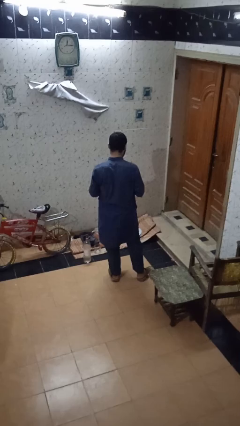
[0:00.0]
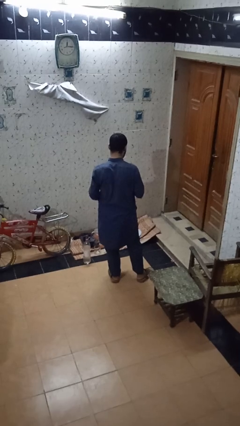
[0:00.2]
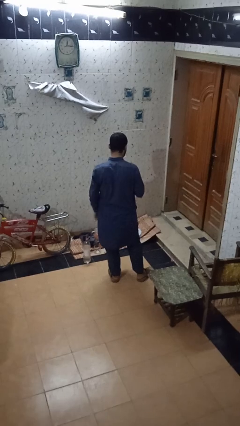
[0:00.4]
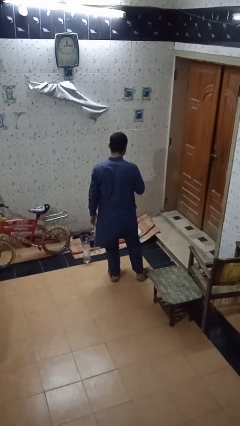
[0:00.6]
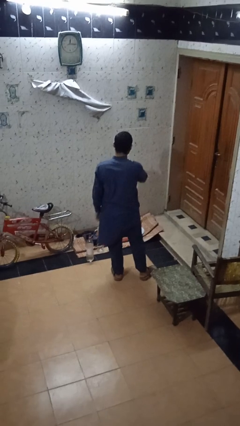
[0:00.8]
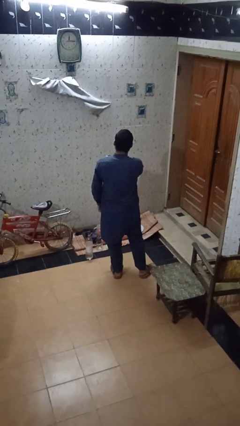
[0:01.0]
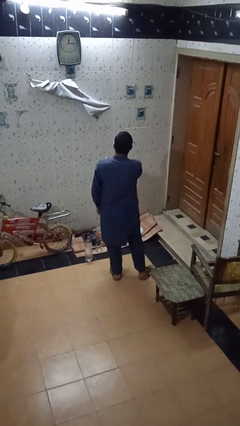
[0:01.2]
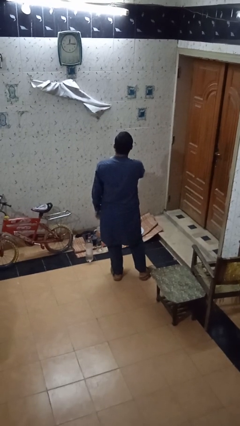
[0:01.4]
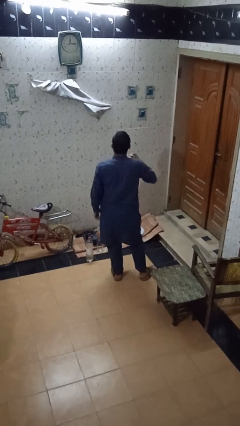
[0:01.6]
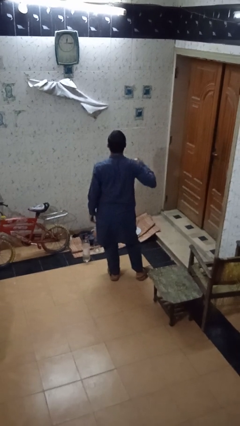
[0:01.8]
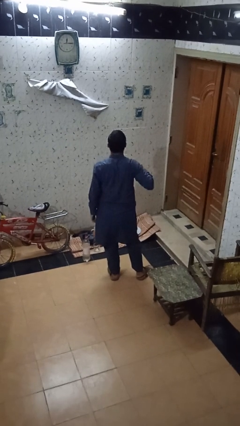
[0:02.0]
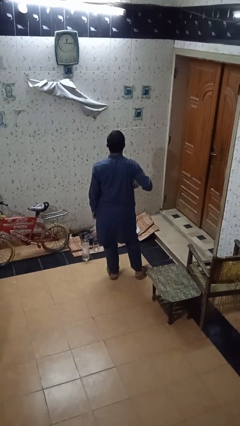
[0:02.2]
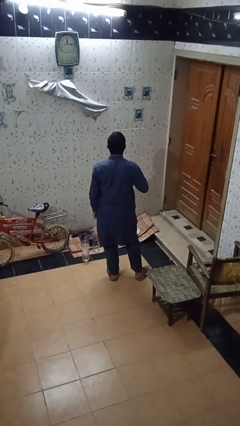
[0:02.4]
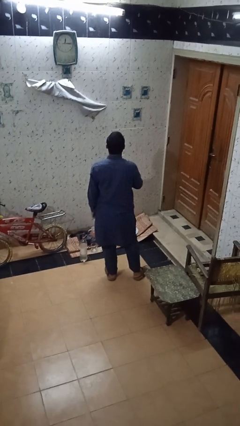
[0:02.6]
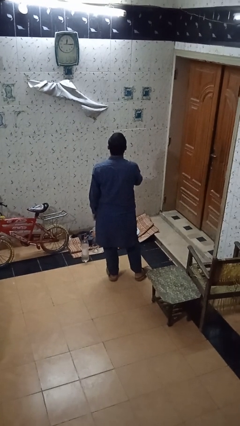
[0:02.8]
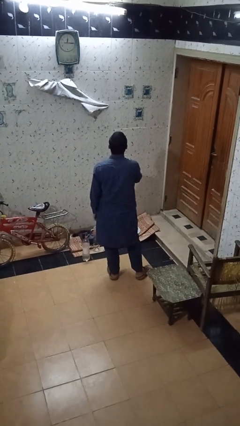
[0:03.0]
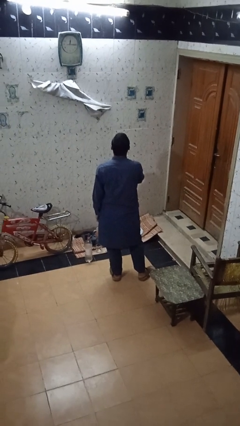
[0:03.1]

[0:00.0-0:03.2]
person applies deodorant

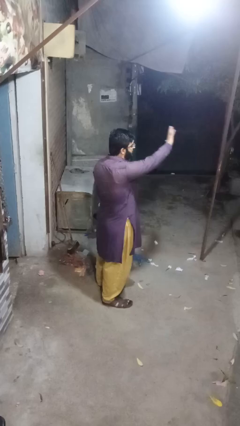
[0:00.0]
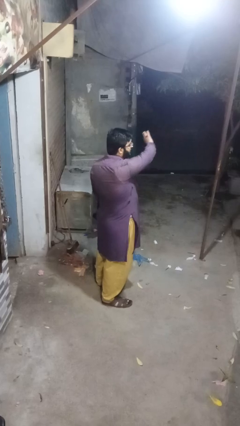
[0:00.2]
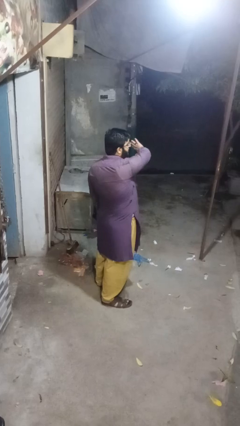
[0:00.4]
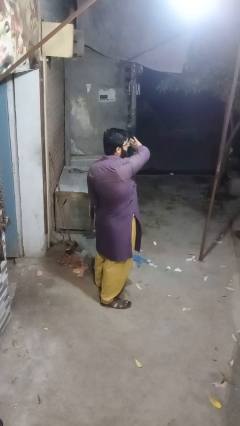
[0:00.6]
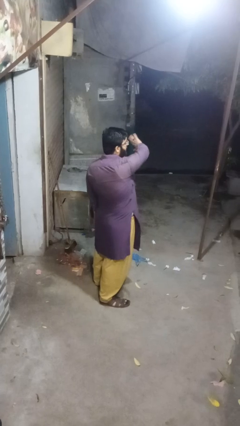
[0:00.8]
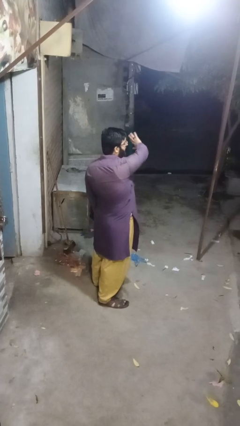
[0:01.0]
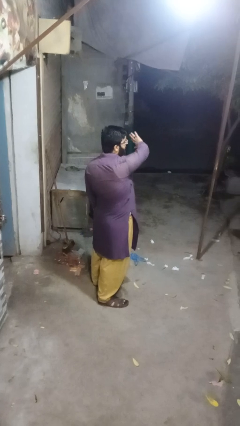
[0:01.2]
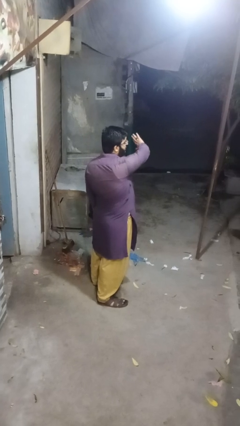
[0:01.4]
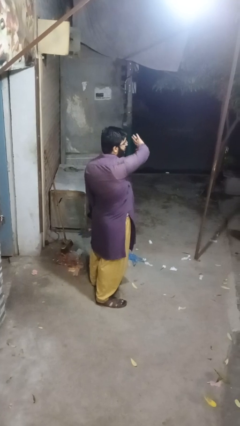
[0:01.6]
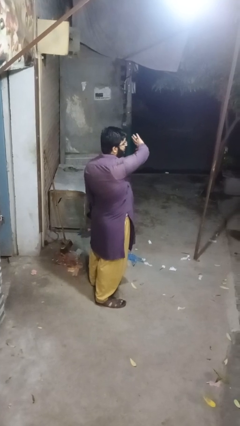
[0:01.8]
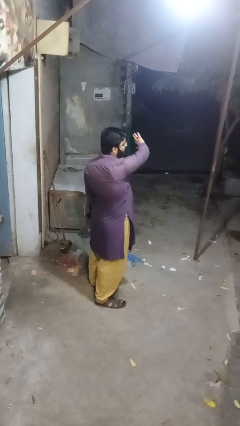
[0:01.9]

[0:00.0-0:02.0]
person gestures swipe left

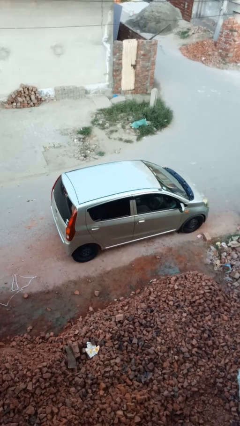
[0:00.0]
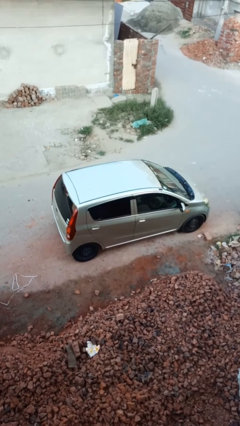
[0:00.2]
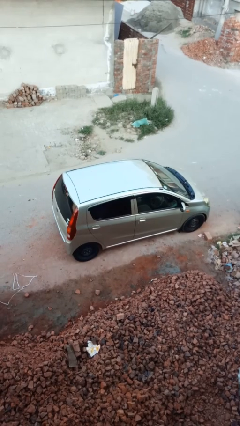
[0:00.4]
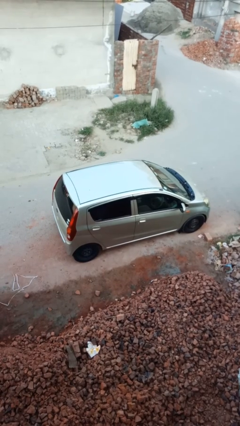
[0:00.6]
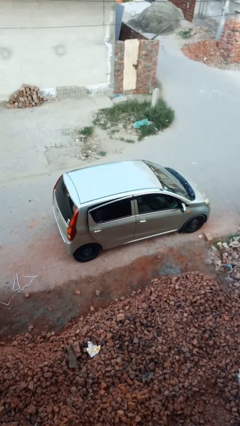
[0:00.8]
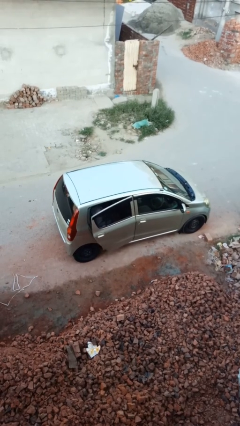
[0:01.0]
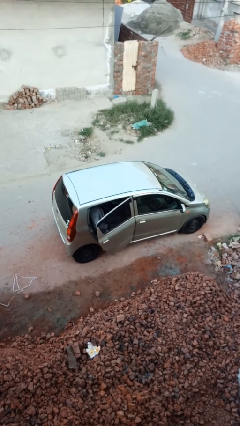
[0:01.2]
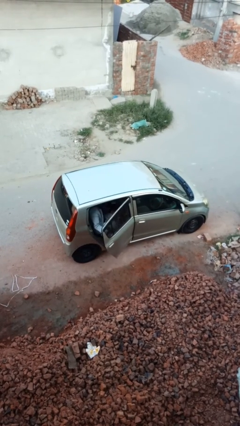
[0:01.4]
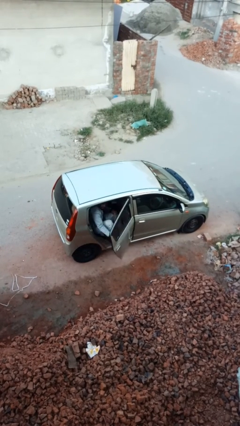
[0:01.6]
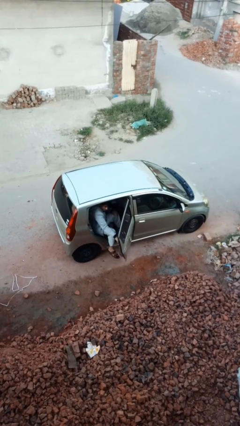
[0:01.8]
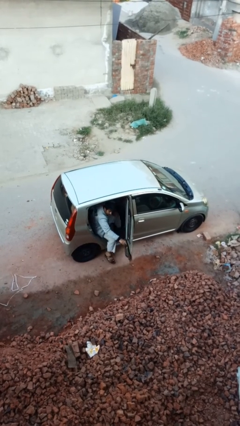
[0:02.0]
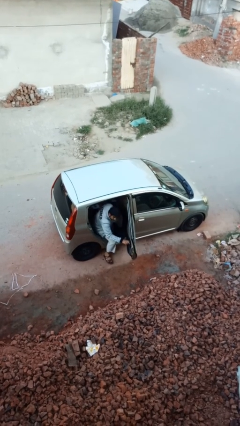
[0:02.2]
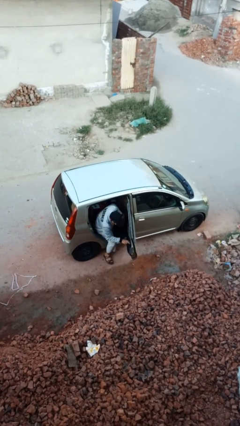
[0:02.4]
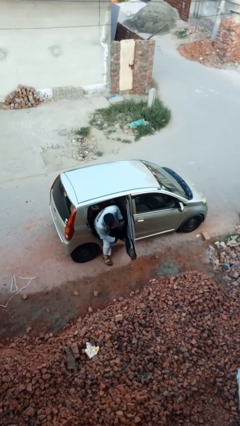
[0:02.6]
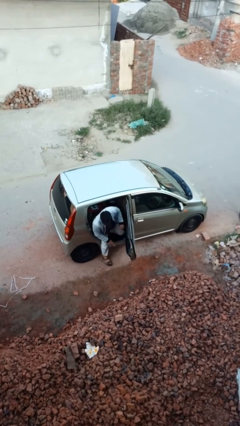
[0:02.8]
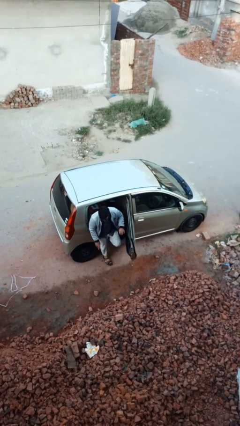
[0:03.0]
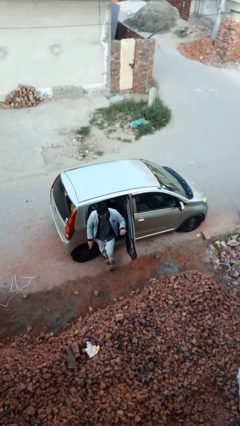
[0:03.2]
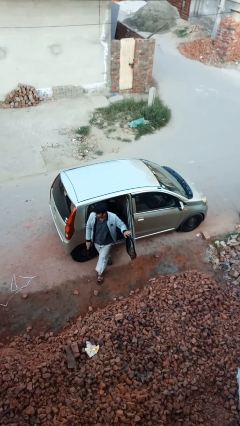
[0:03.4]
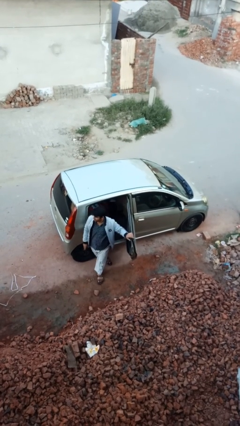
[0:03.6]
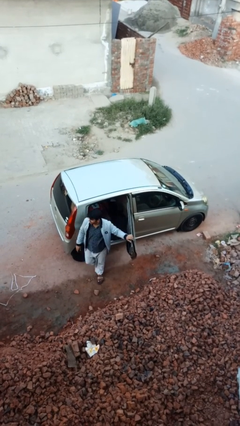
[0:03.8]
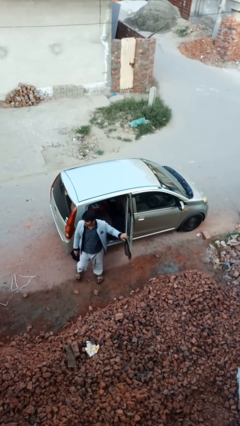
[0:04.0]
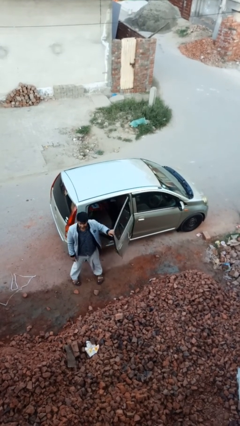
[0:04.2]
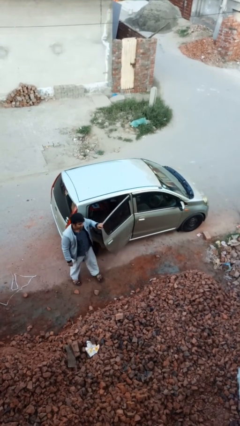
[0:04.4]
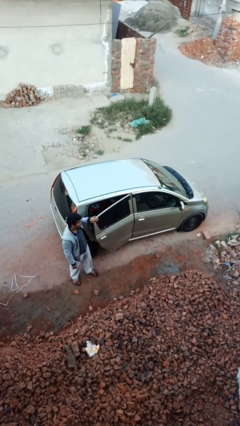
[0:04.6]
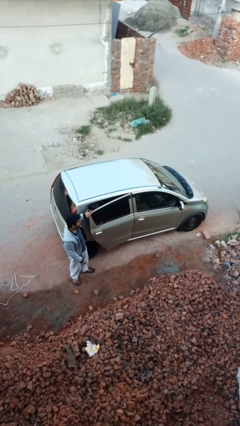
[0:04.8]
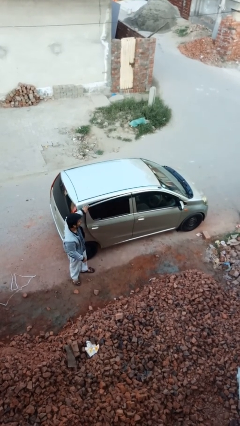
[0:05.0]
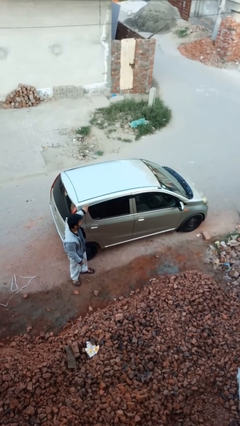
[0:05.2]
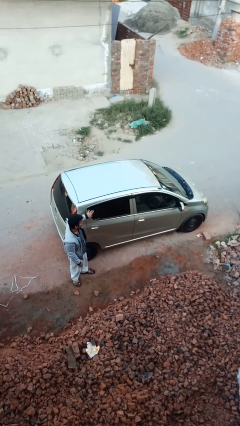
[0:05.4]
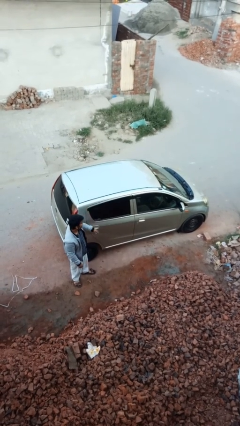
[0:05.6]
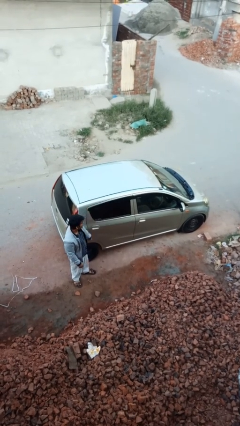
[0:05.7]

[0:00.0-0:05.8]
car drops off person

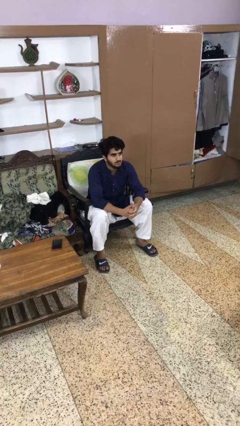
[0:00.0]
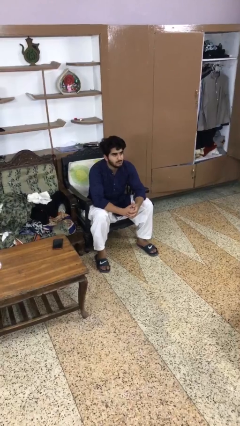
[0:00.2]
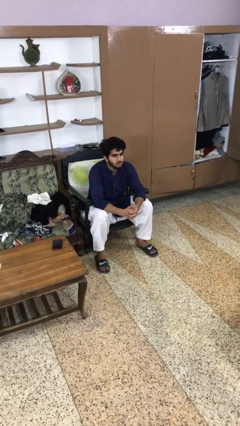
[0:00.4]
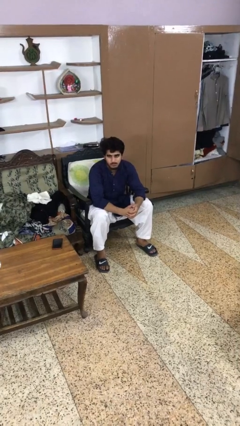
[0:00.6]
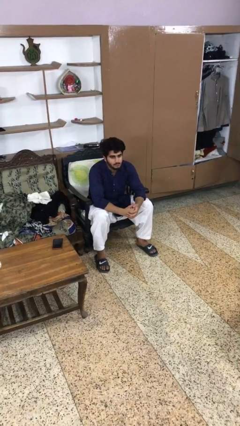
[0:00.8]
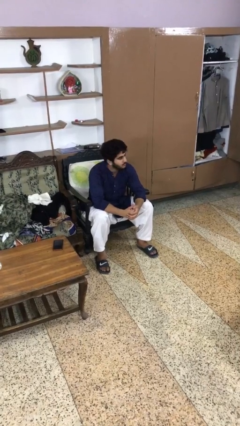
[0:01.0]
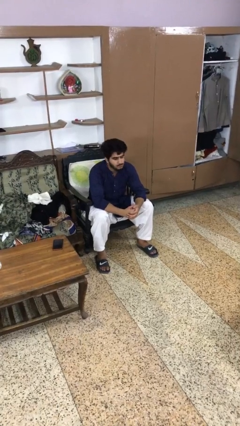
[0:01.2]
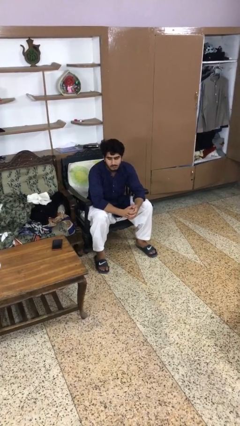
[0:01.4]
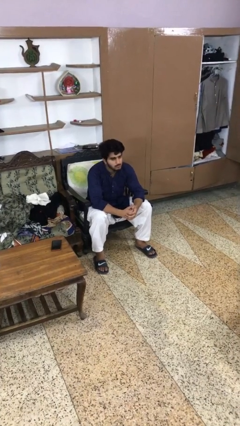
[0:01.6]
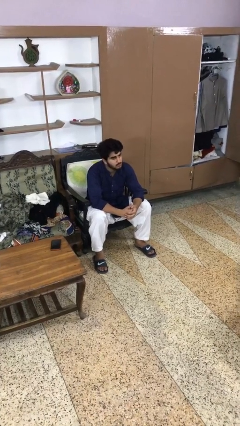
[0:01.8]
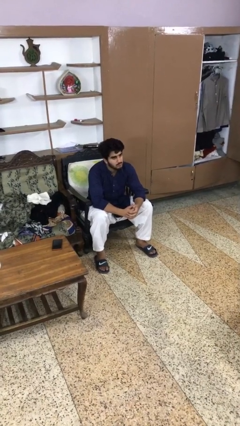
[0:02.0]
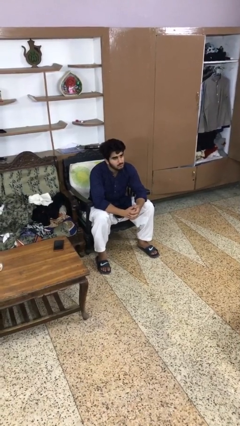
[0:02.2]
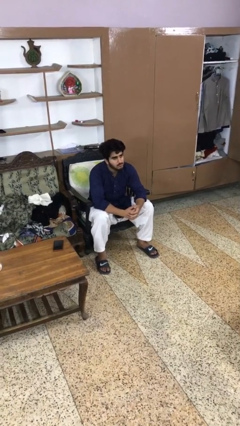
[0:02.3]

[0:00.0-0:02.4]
person shakes head

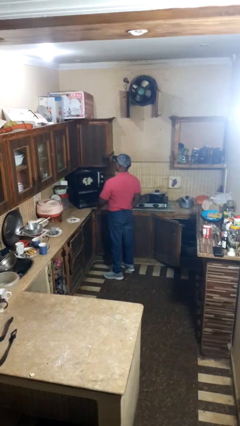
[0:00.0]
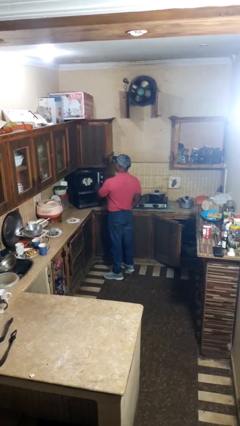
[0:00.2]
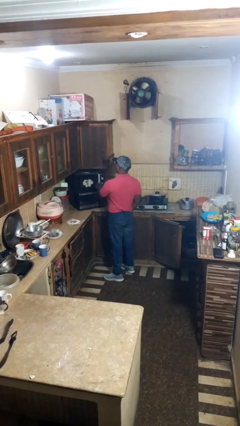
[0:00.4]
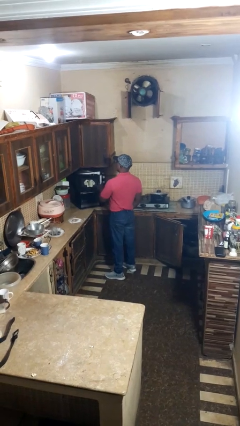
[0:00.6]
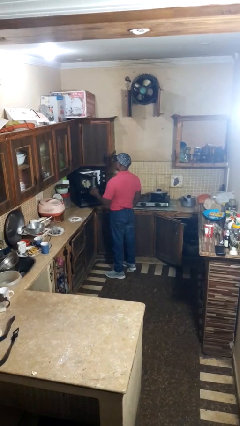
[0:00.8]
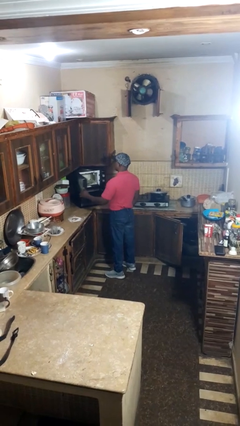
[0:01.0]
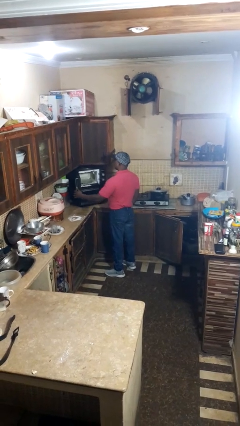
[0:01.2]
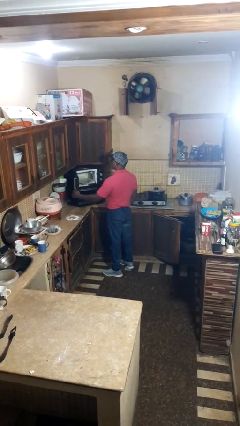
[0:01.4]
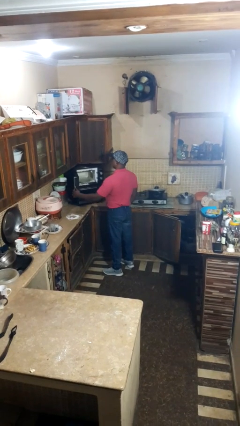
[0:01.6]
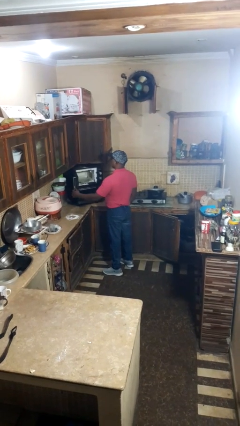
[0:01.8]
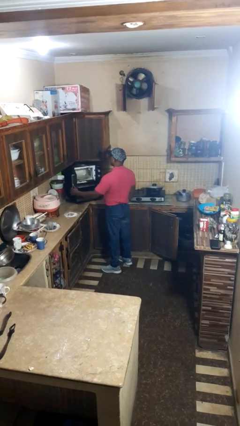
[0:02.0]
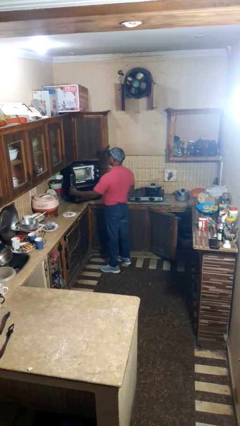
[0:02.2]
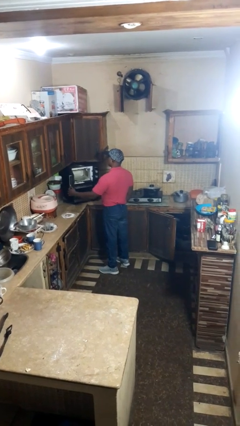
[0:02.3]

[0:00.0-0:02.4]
person opens microwave

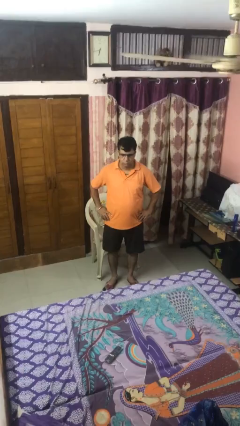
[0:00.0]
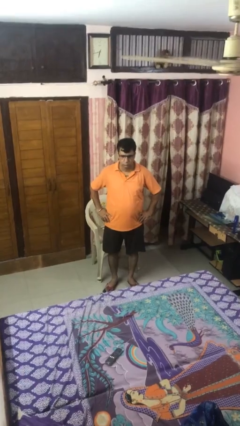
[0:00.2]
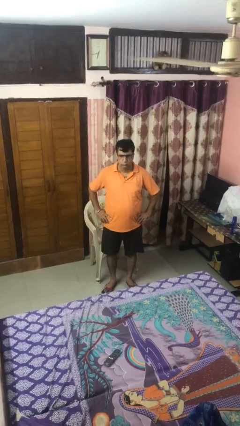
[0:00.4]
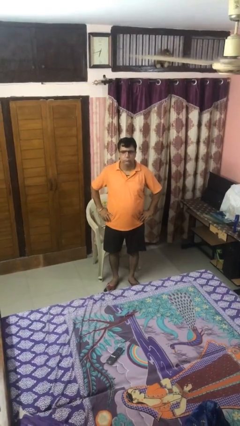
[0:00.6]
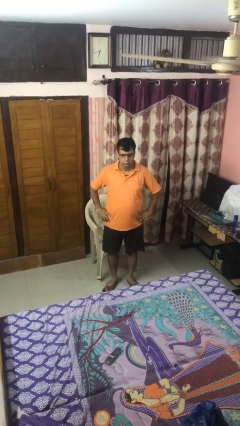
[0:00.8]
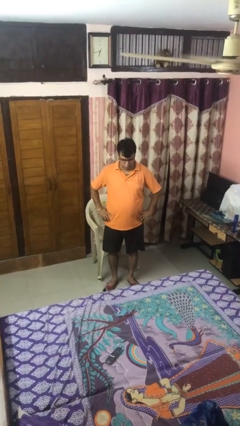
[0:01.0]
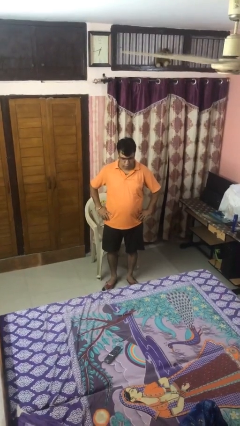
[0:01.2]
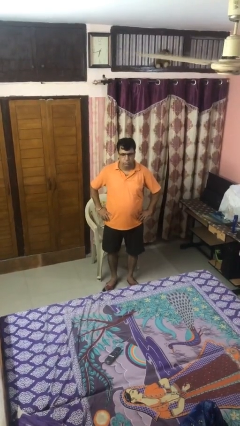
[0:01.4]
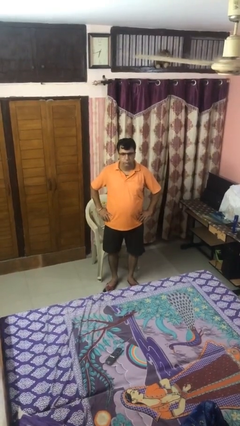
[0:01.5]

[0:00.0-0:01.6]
person nods head
